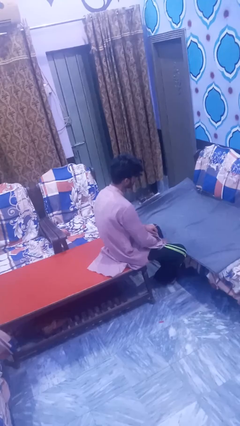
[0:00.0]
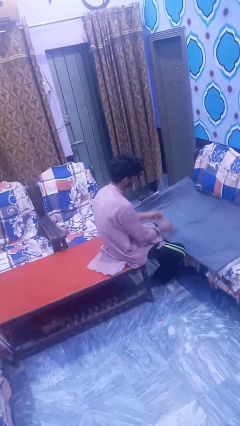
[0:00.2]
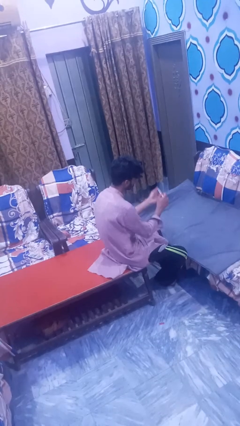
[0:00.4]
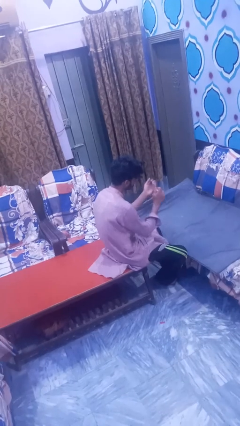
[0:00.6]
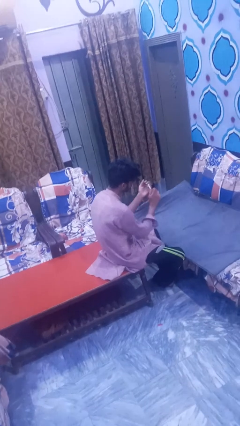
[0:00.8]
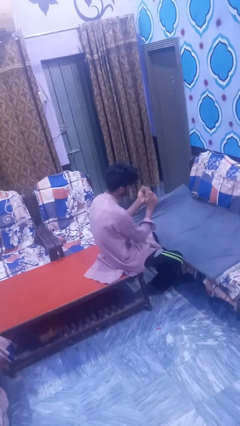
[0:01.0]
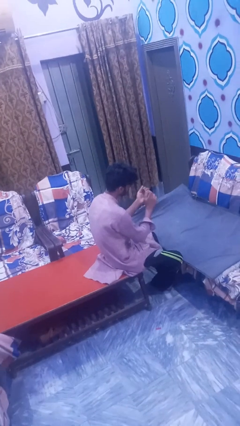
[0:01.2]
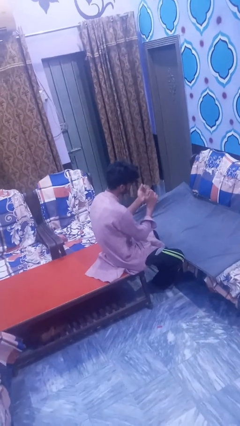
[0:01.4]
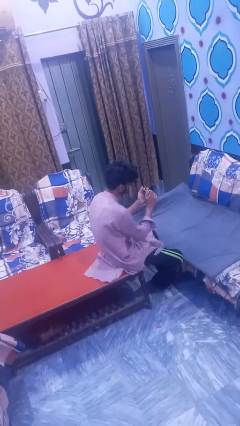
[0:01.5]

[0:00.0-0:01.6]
person files fingernails

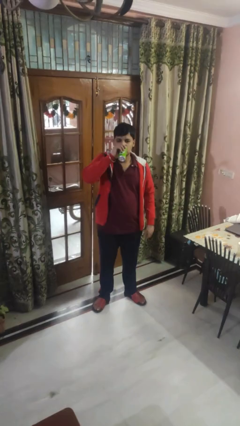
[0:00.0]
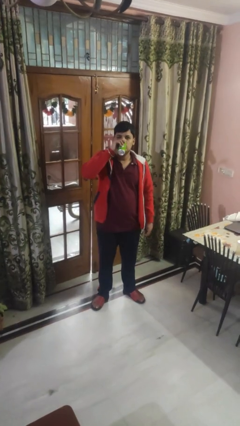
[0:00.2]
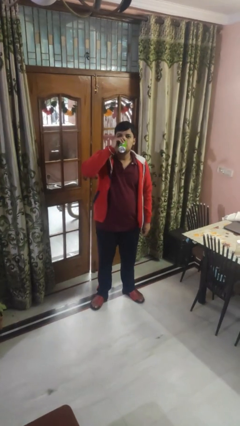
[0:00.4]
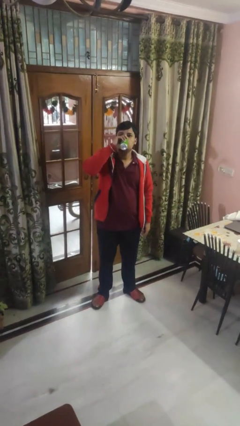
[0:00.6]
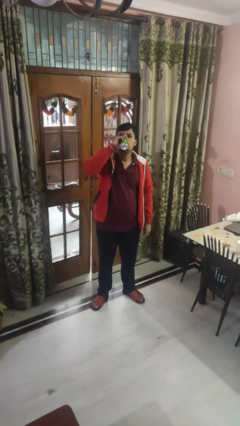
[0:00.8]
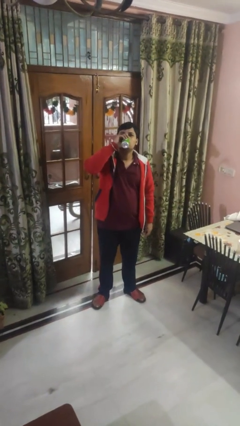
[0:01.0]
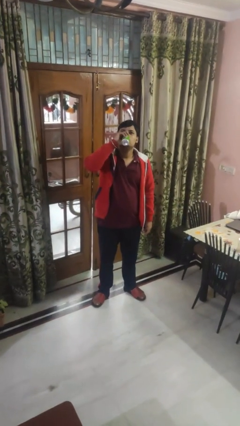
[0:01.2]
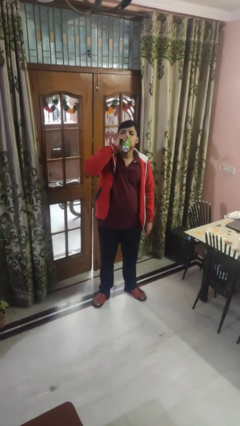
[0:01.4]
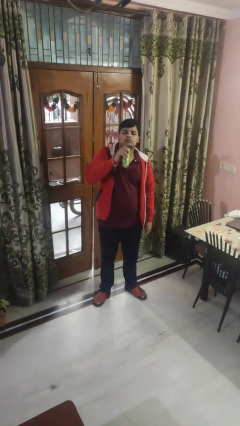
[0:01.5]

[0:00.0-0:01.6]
person drinks from beverage can

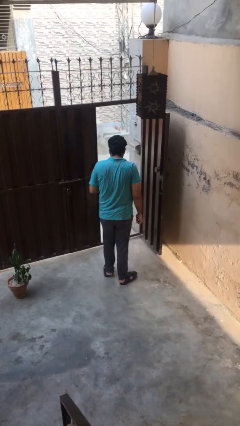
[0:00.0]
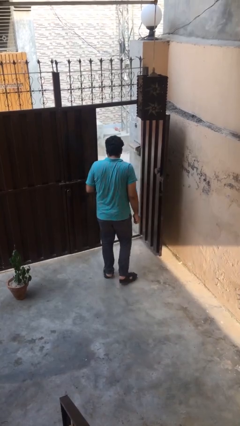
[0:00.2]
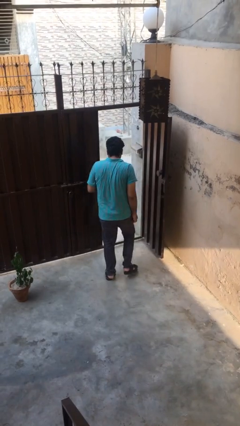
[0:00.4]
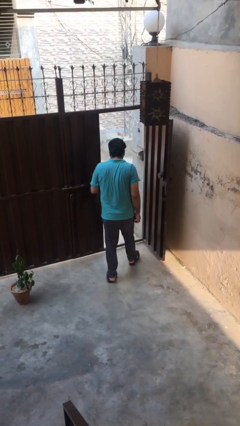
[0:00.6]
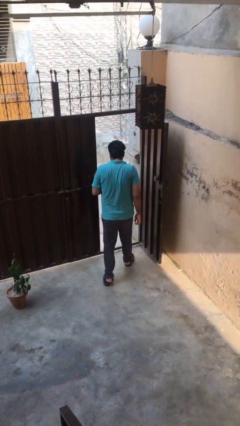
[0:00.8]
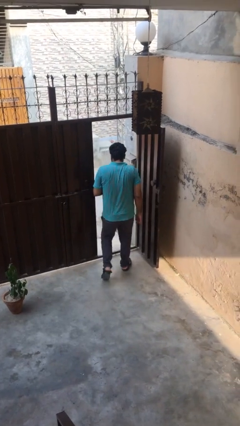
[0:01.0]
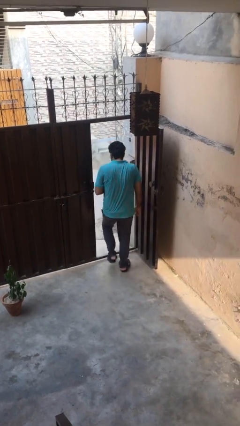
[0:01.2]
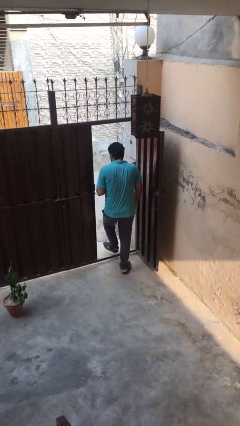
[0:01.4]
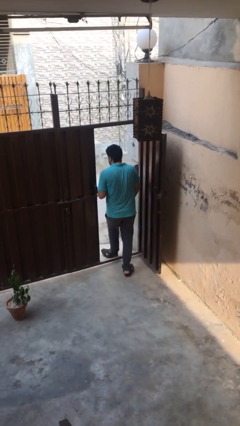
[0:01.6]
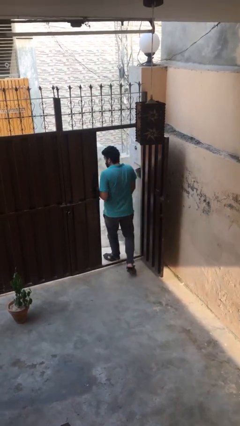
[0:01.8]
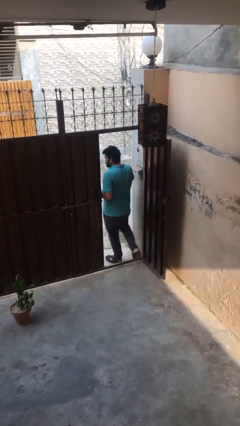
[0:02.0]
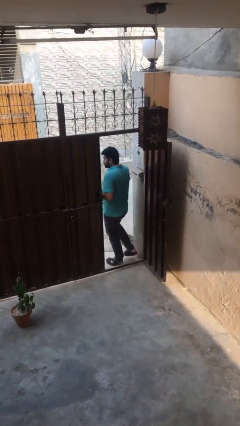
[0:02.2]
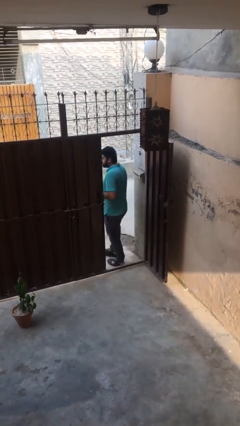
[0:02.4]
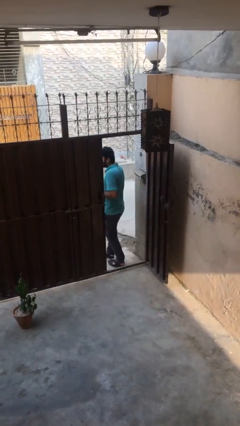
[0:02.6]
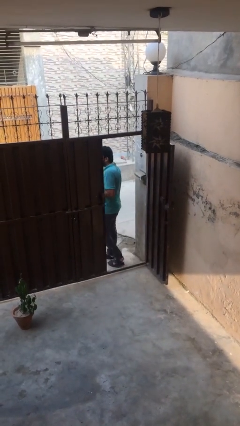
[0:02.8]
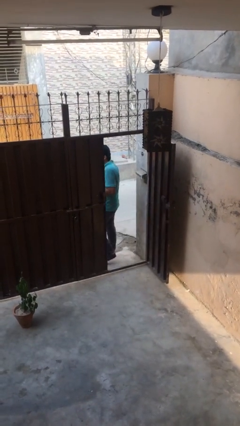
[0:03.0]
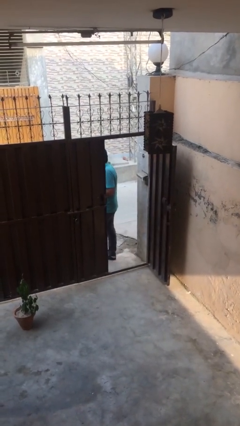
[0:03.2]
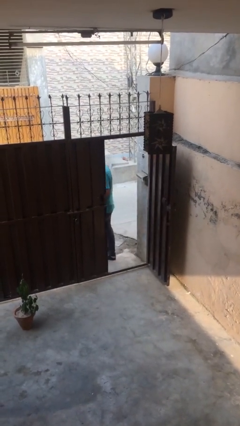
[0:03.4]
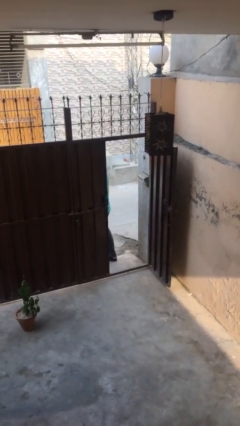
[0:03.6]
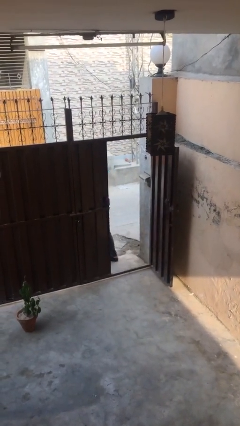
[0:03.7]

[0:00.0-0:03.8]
person exits scene through structure

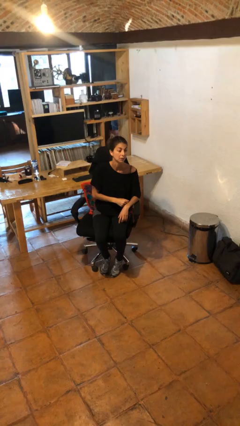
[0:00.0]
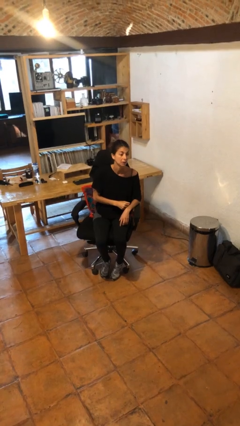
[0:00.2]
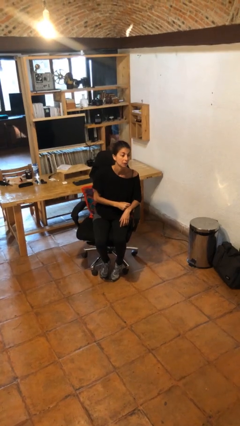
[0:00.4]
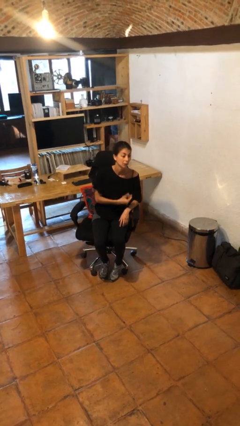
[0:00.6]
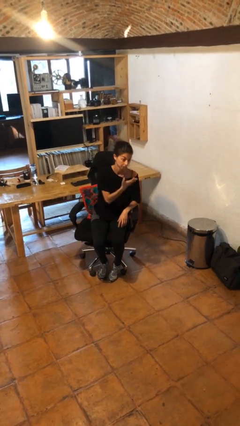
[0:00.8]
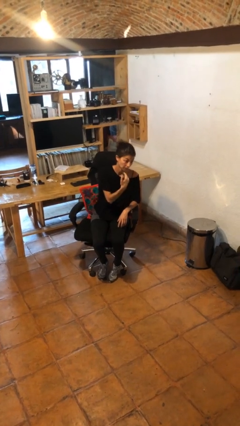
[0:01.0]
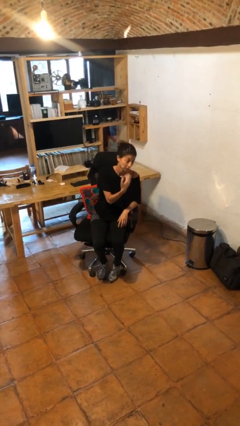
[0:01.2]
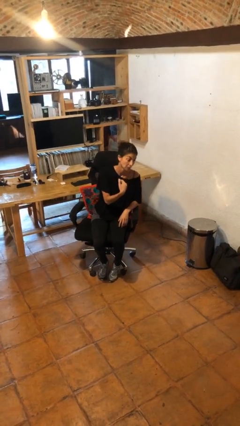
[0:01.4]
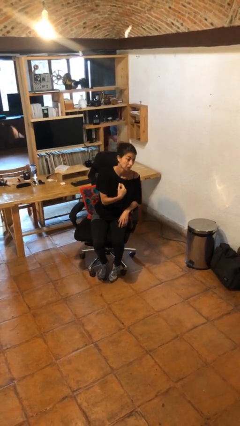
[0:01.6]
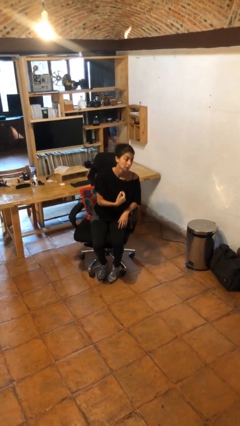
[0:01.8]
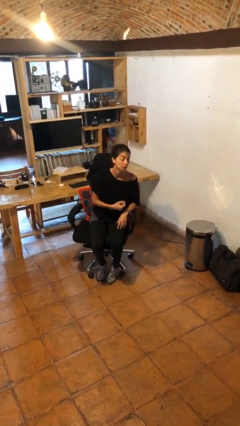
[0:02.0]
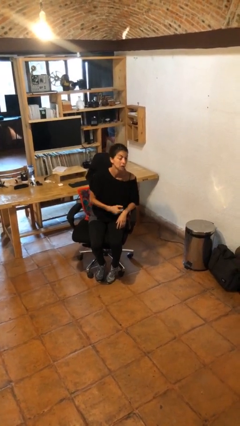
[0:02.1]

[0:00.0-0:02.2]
person gestures come here

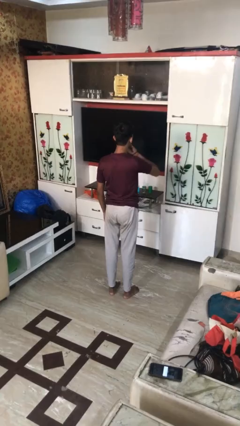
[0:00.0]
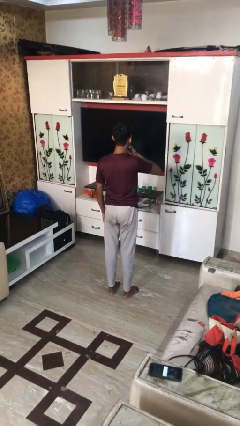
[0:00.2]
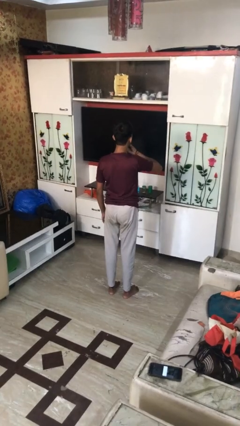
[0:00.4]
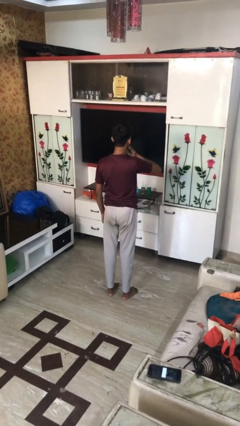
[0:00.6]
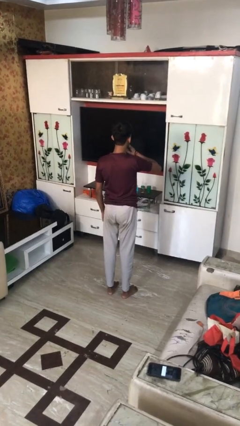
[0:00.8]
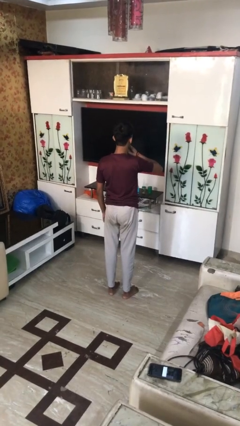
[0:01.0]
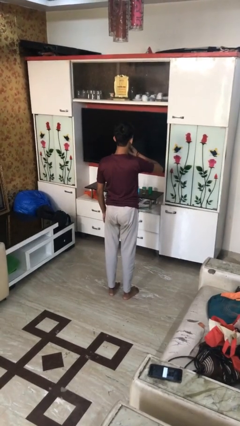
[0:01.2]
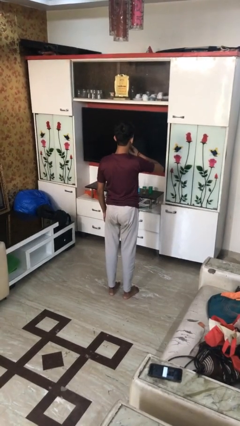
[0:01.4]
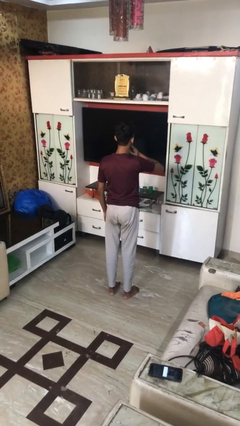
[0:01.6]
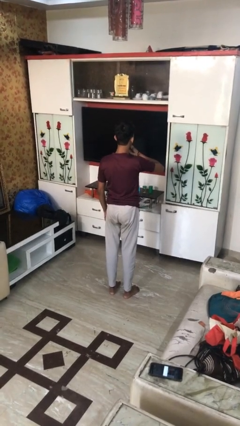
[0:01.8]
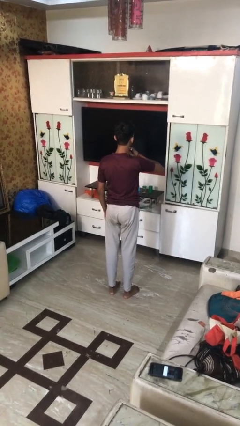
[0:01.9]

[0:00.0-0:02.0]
person strokes chin

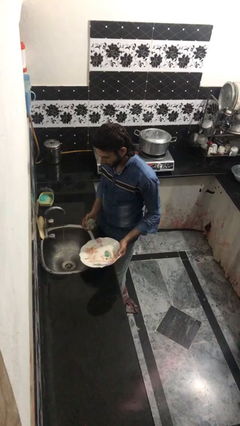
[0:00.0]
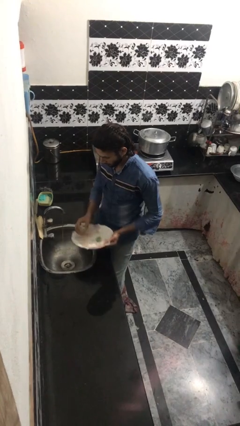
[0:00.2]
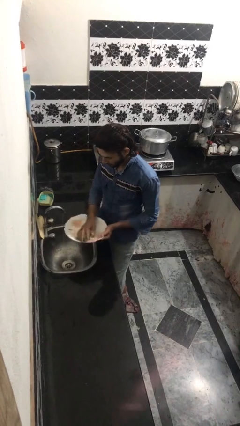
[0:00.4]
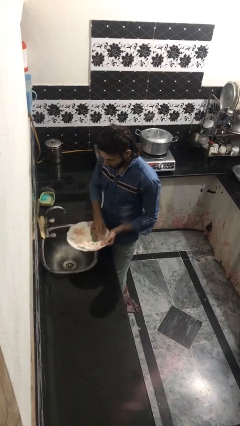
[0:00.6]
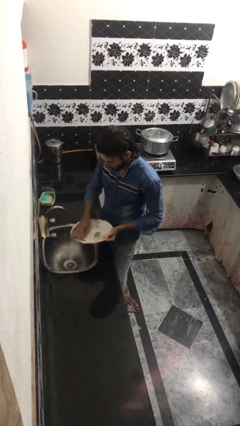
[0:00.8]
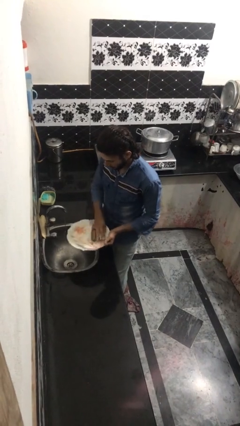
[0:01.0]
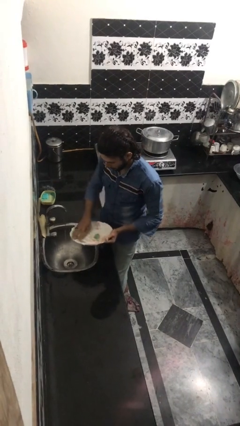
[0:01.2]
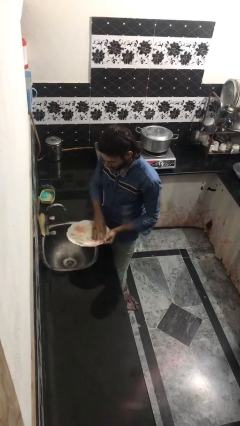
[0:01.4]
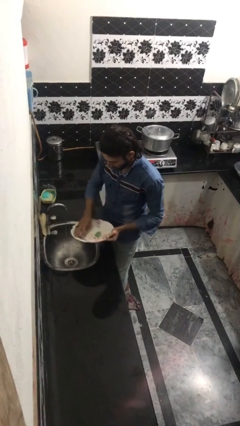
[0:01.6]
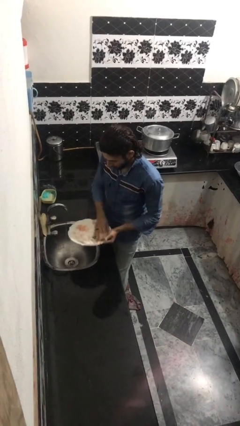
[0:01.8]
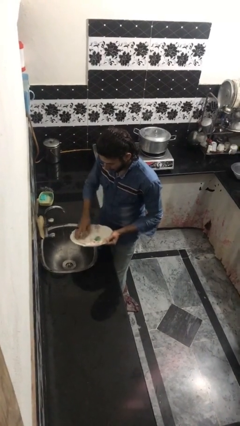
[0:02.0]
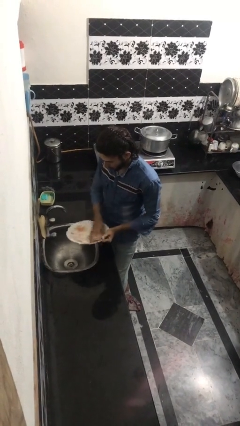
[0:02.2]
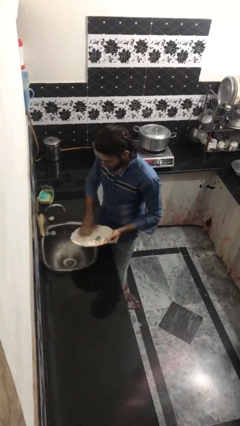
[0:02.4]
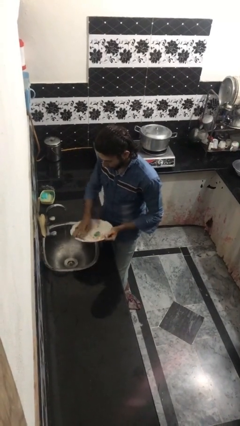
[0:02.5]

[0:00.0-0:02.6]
person washes dish

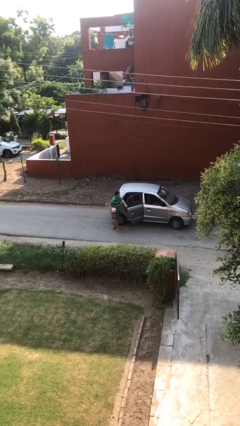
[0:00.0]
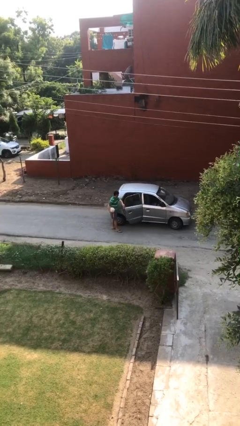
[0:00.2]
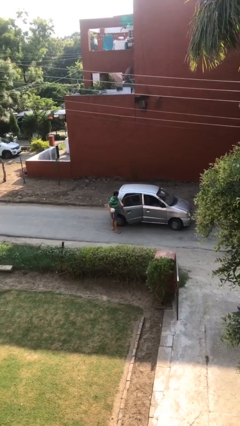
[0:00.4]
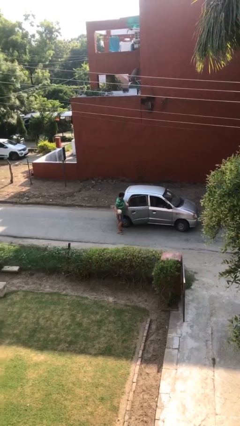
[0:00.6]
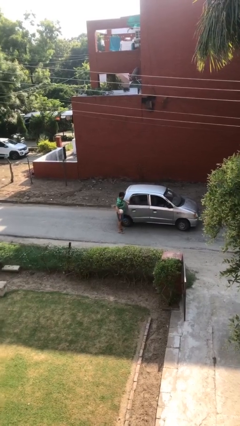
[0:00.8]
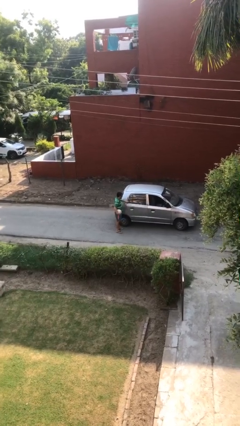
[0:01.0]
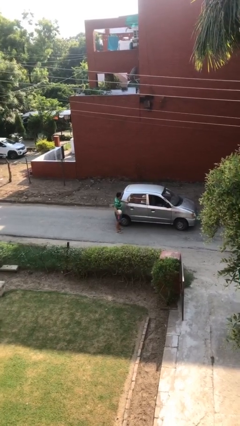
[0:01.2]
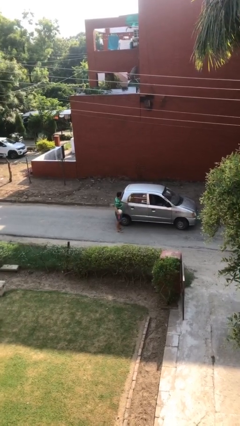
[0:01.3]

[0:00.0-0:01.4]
person closes car door

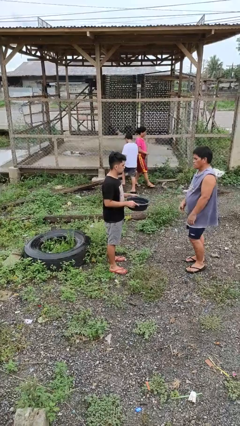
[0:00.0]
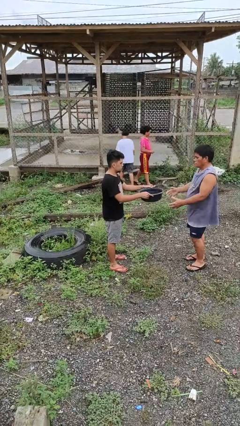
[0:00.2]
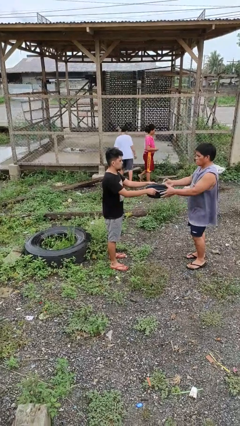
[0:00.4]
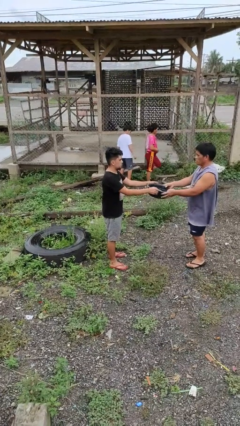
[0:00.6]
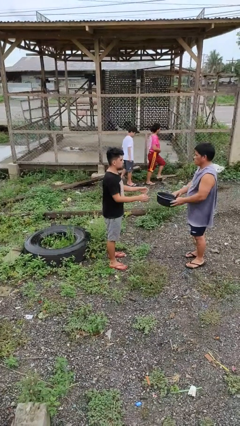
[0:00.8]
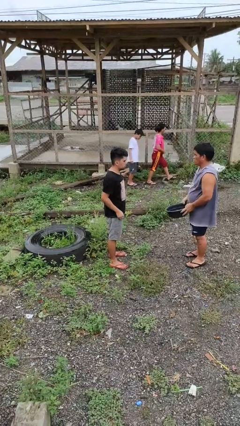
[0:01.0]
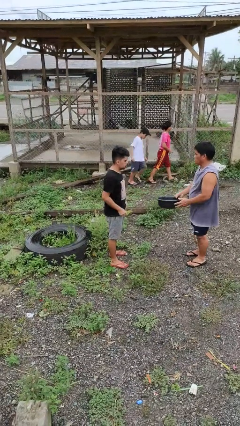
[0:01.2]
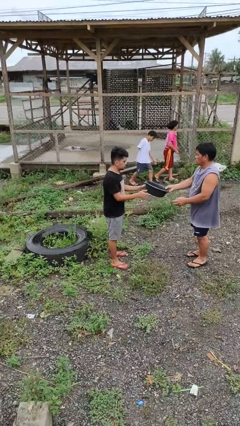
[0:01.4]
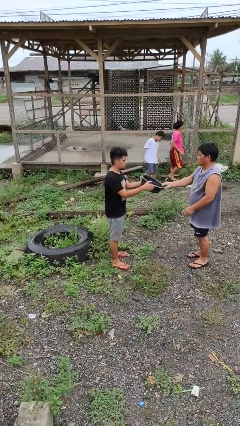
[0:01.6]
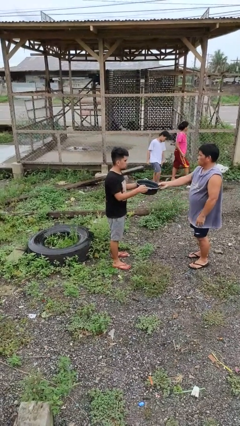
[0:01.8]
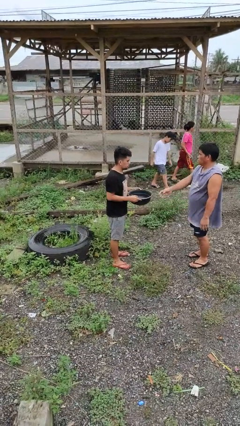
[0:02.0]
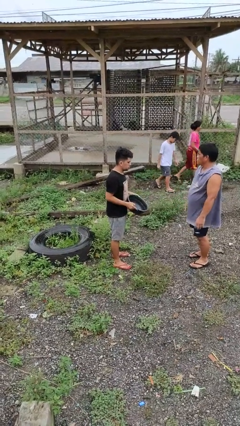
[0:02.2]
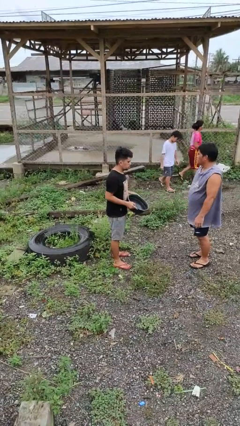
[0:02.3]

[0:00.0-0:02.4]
person transfers object to person
